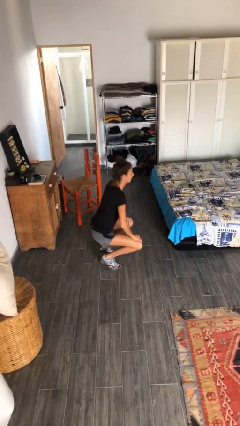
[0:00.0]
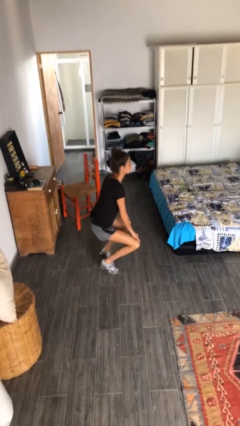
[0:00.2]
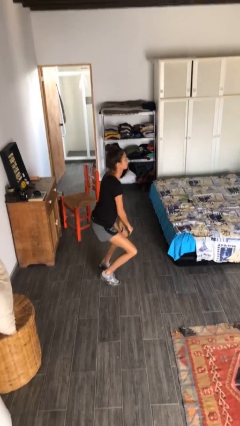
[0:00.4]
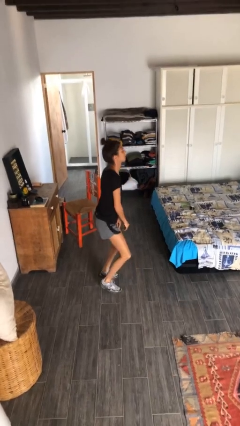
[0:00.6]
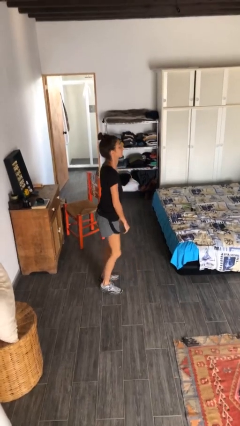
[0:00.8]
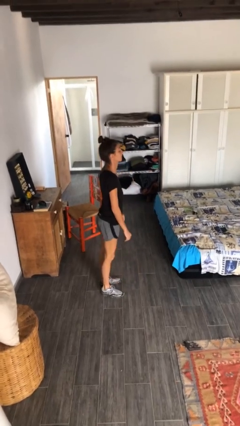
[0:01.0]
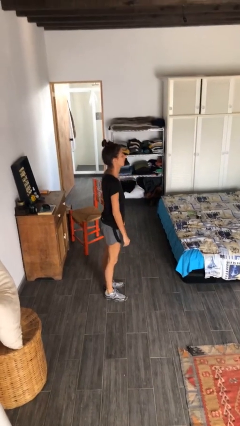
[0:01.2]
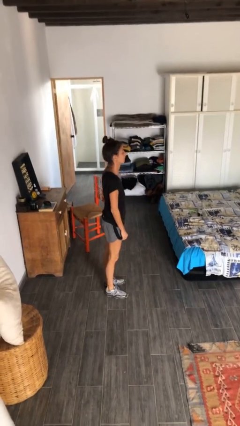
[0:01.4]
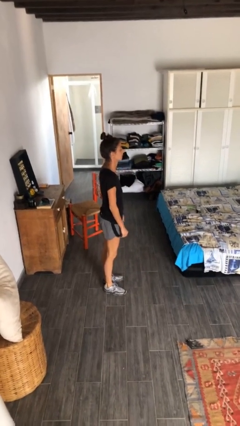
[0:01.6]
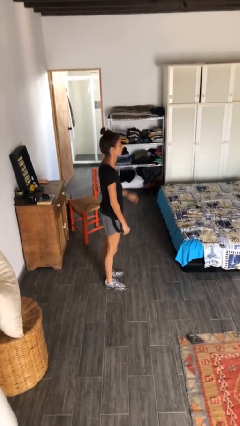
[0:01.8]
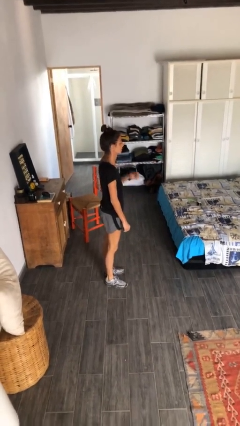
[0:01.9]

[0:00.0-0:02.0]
person stands up

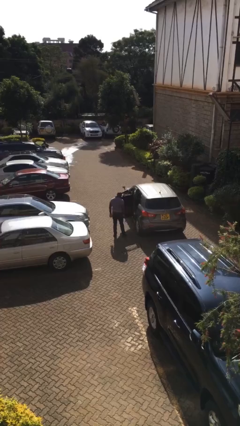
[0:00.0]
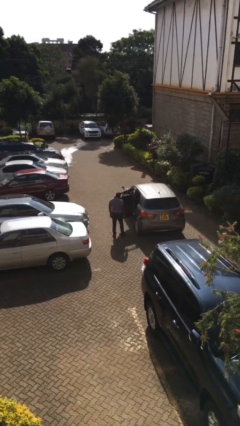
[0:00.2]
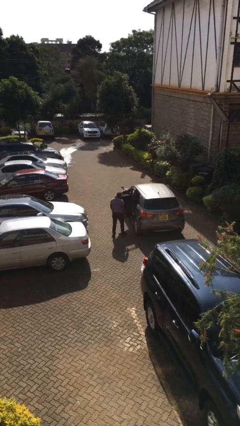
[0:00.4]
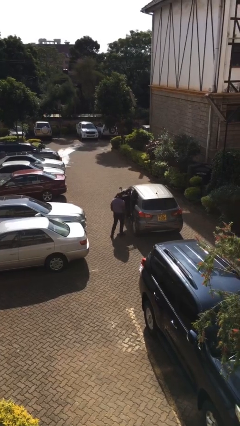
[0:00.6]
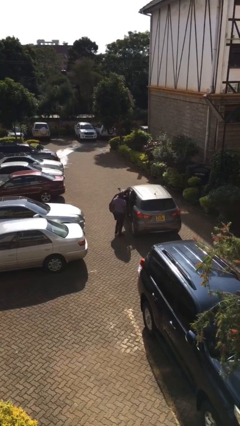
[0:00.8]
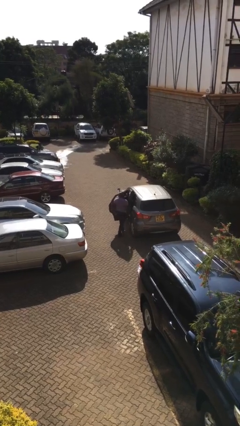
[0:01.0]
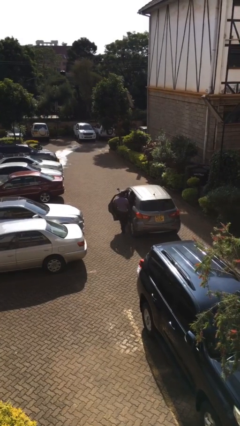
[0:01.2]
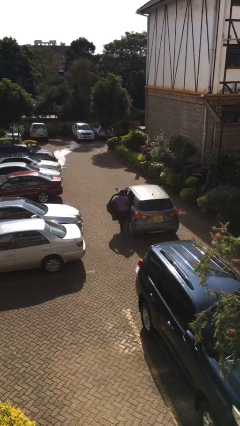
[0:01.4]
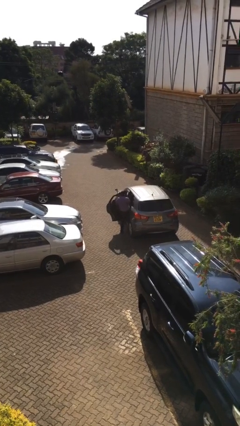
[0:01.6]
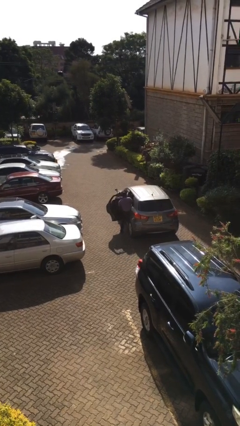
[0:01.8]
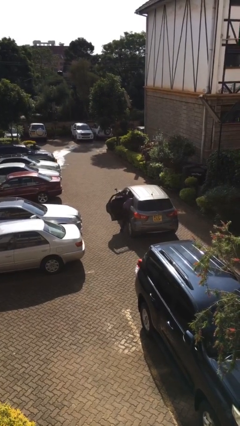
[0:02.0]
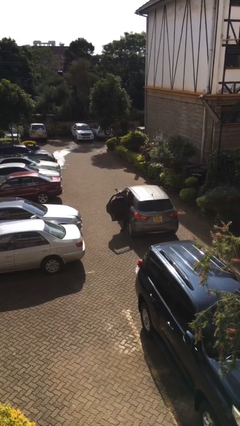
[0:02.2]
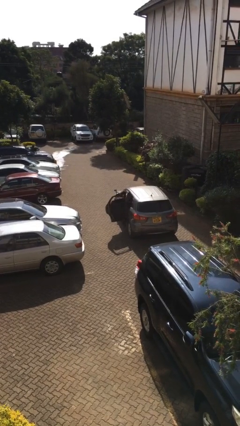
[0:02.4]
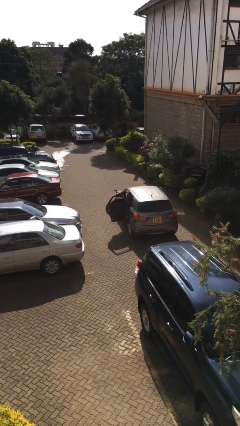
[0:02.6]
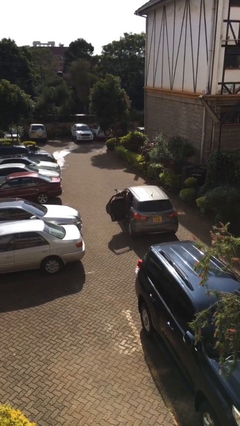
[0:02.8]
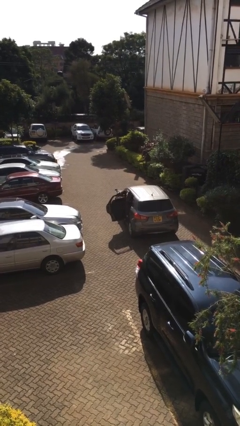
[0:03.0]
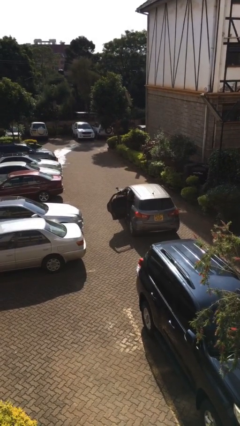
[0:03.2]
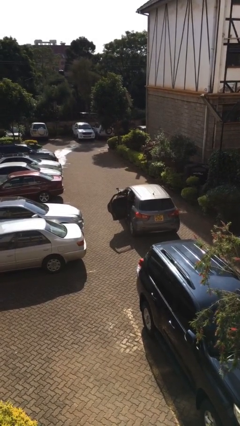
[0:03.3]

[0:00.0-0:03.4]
person enters car

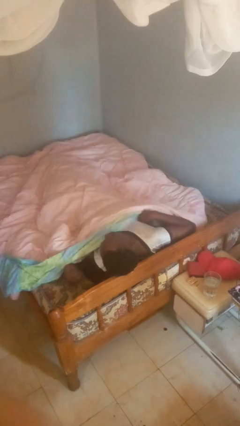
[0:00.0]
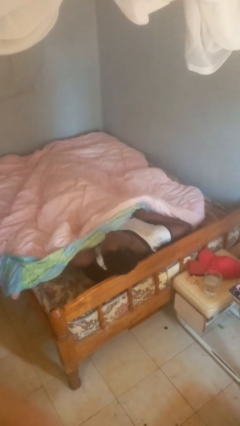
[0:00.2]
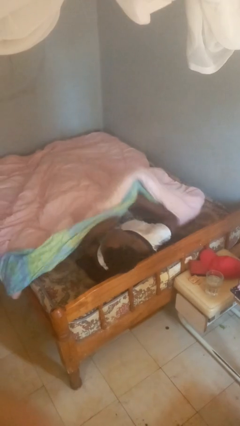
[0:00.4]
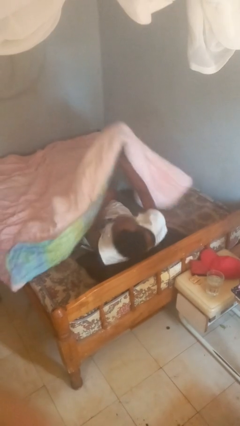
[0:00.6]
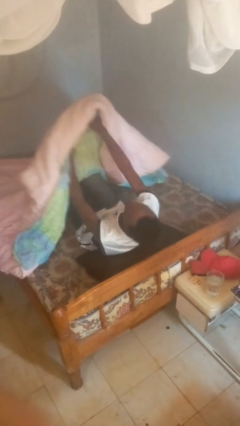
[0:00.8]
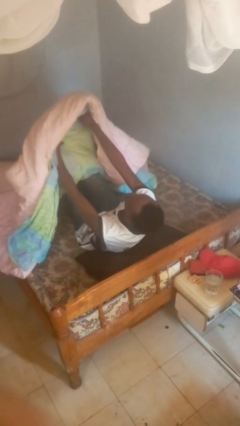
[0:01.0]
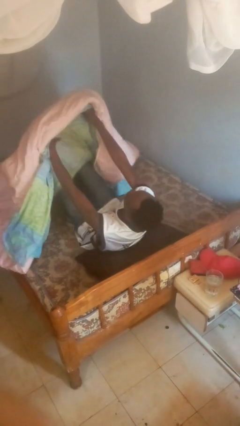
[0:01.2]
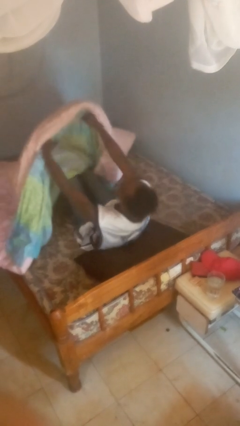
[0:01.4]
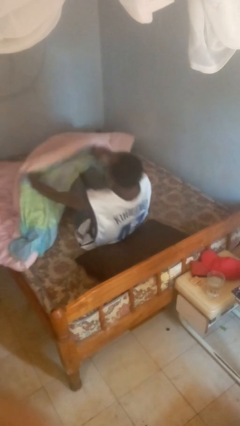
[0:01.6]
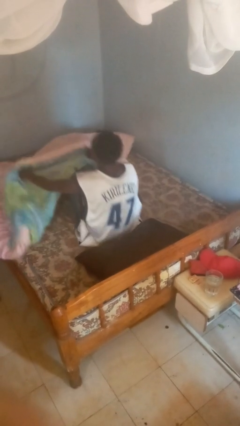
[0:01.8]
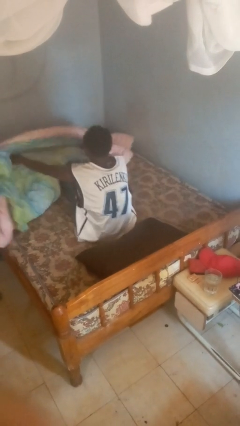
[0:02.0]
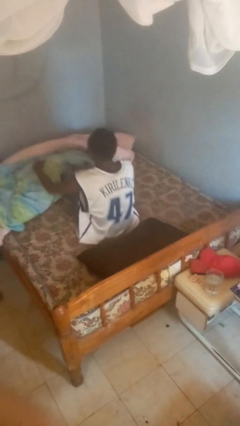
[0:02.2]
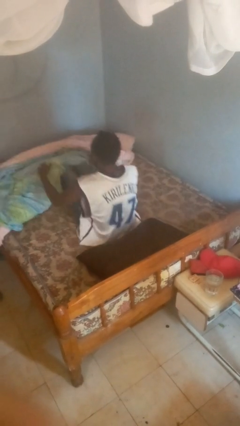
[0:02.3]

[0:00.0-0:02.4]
person uncovers with bedsheets

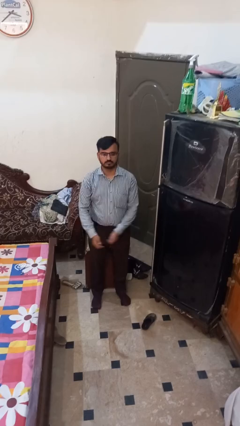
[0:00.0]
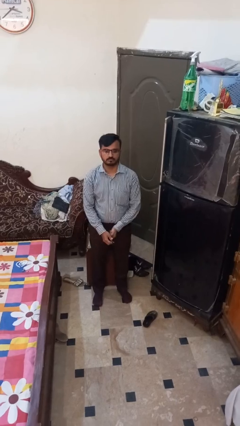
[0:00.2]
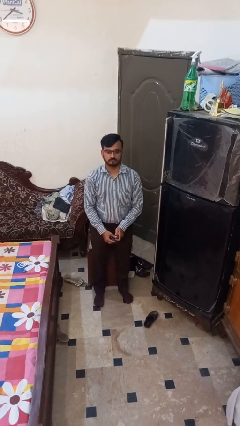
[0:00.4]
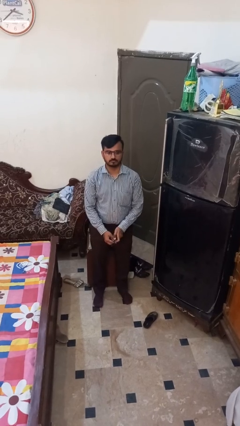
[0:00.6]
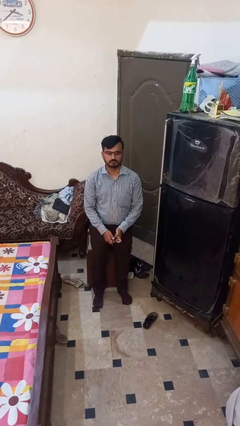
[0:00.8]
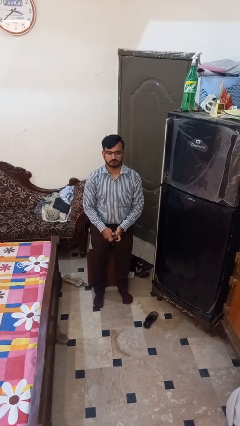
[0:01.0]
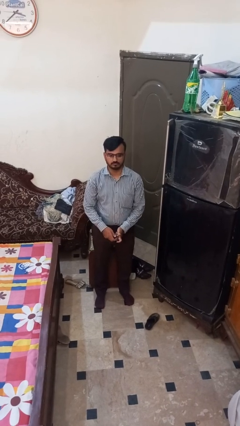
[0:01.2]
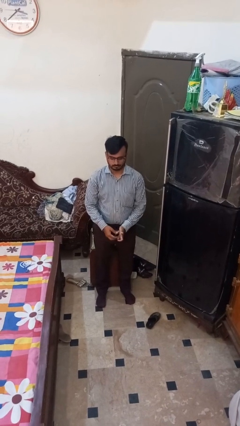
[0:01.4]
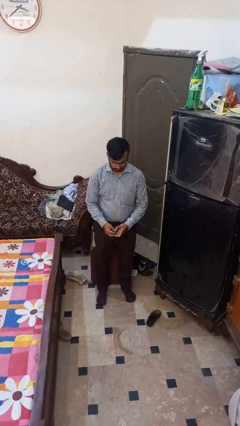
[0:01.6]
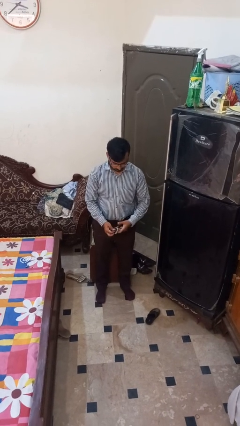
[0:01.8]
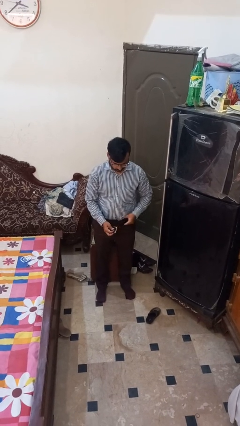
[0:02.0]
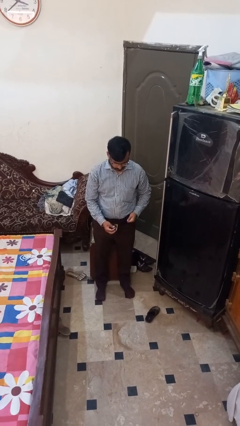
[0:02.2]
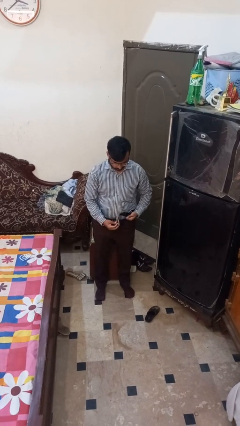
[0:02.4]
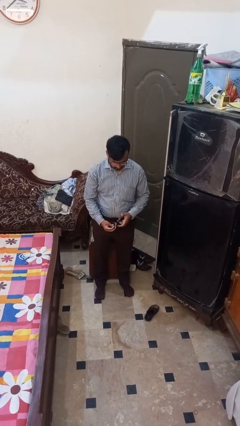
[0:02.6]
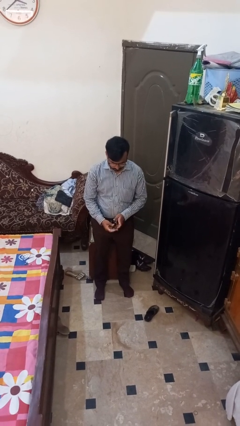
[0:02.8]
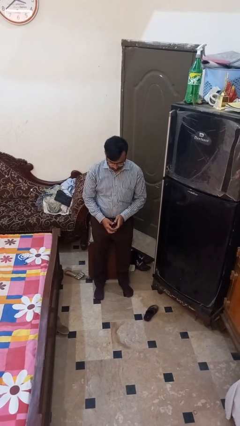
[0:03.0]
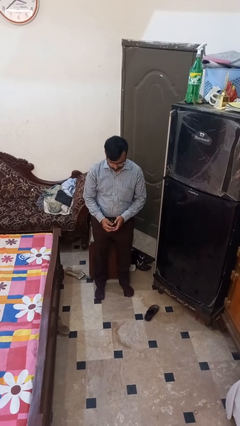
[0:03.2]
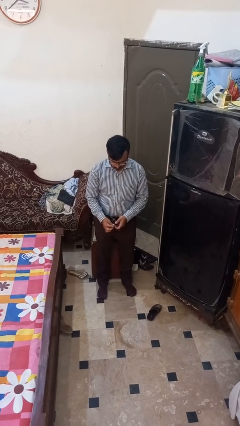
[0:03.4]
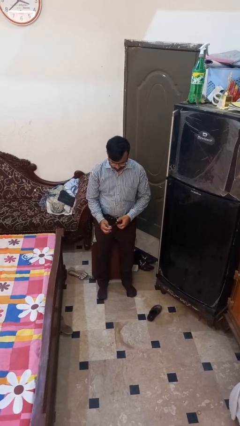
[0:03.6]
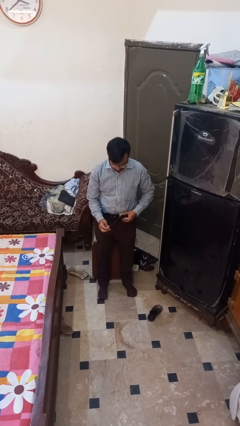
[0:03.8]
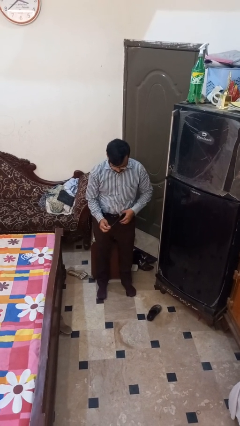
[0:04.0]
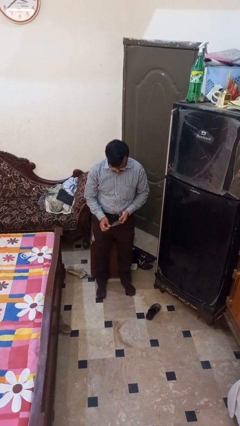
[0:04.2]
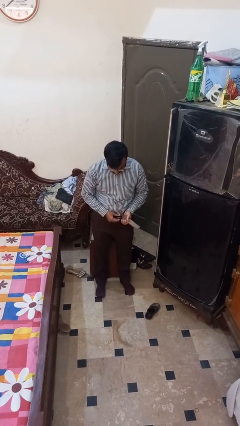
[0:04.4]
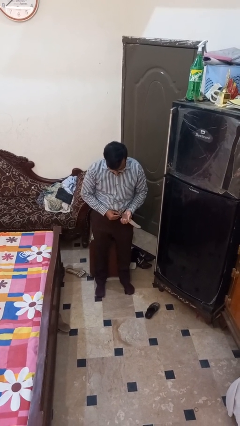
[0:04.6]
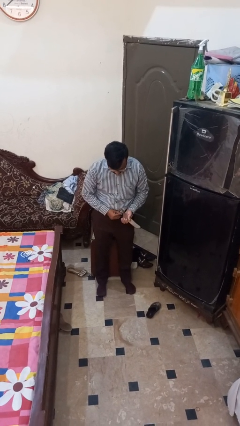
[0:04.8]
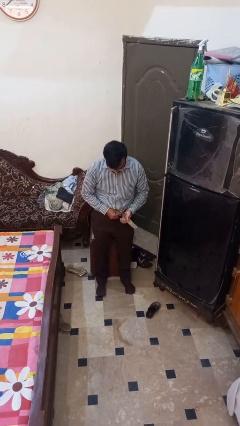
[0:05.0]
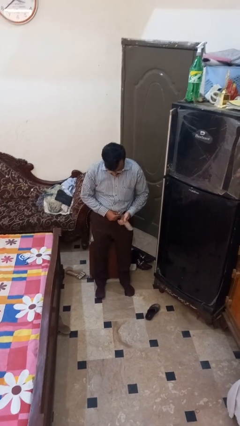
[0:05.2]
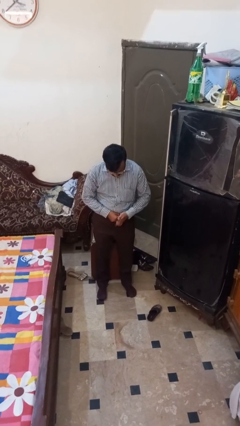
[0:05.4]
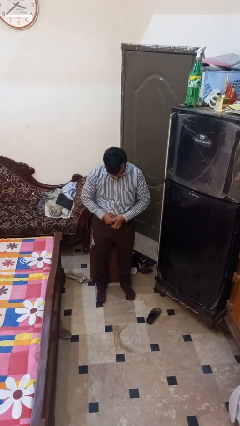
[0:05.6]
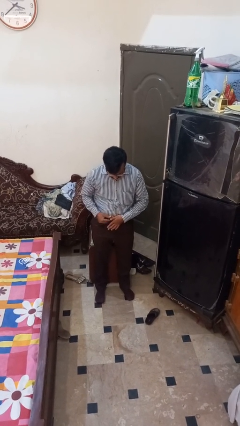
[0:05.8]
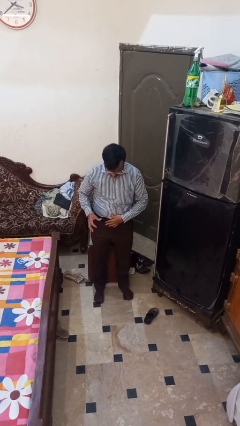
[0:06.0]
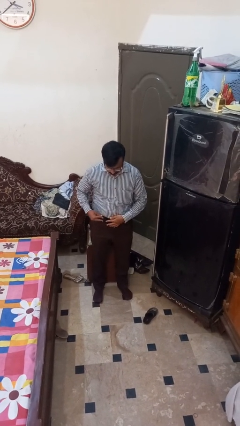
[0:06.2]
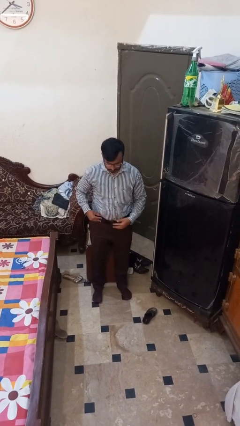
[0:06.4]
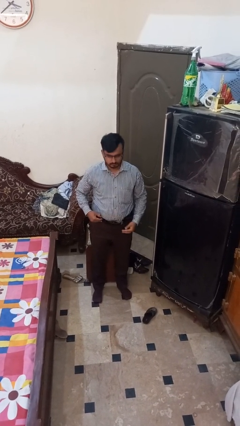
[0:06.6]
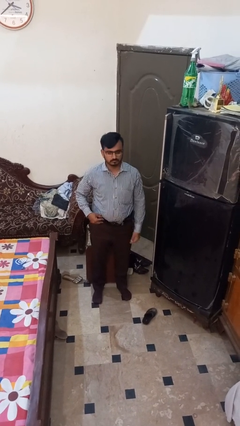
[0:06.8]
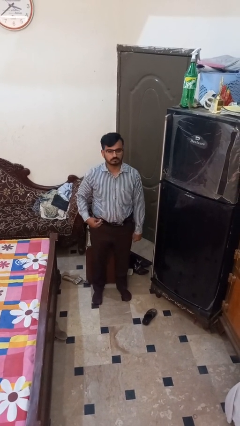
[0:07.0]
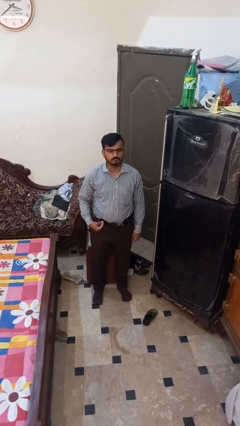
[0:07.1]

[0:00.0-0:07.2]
person puts on belt

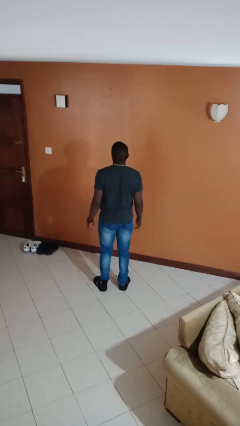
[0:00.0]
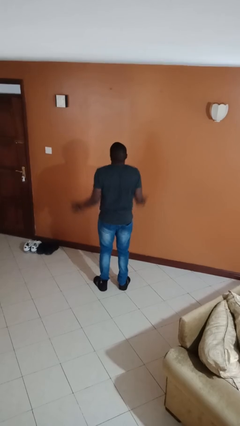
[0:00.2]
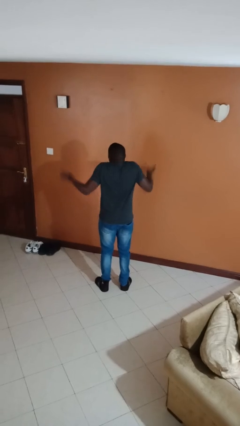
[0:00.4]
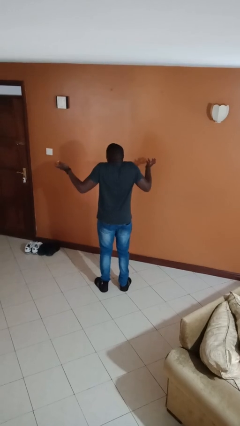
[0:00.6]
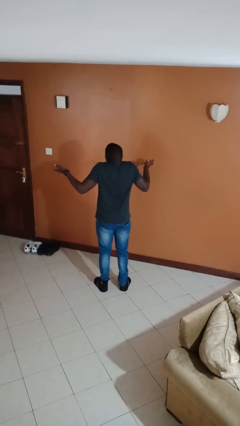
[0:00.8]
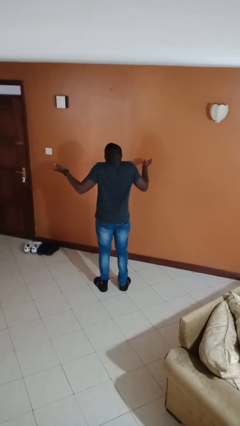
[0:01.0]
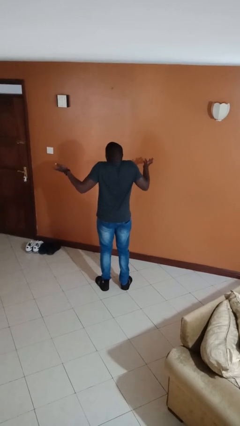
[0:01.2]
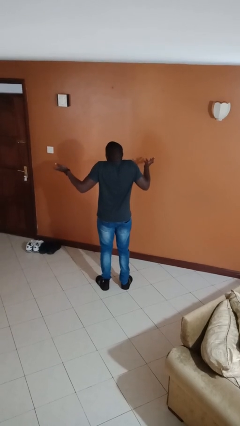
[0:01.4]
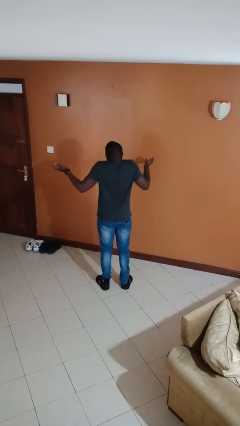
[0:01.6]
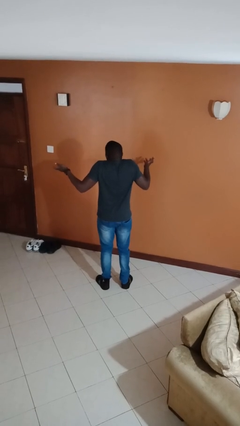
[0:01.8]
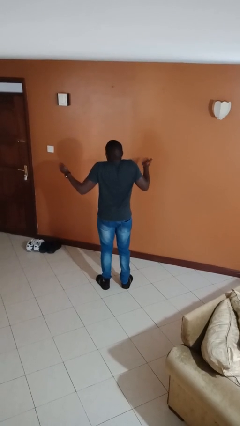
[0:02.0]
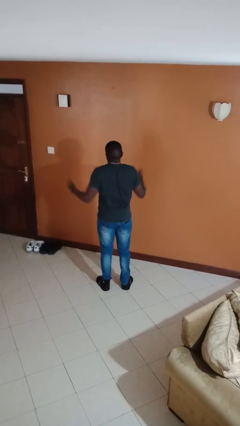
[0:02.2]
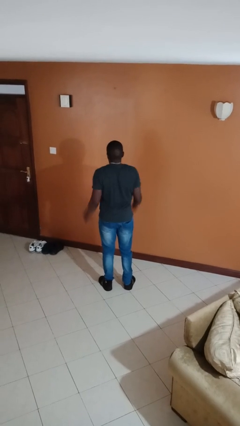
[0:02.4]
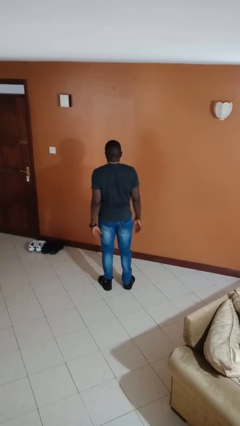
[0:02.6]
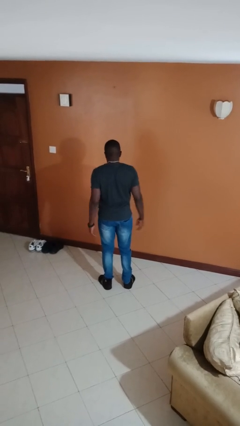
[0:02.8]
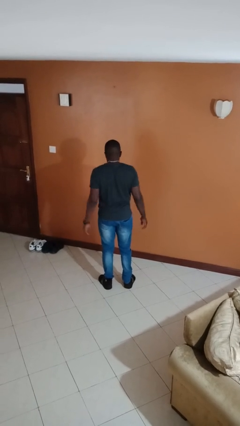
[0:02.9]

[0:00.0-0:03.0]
person shrugs
